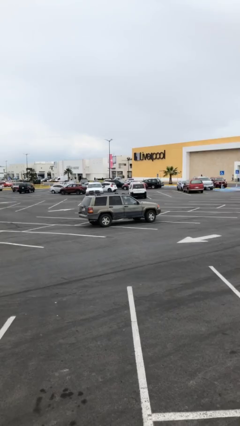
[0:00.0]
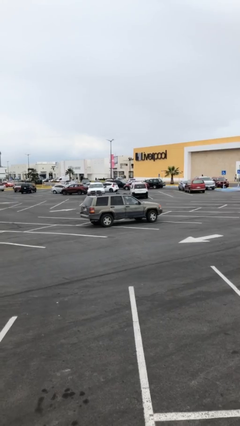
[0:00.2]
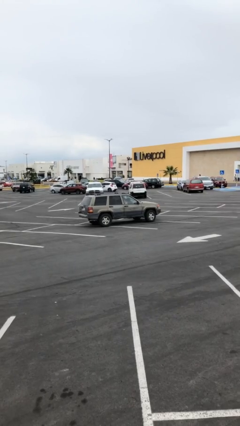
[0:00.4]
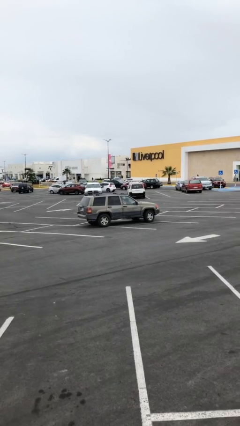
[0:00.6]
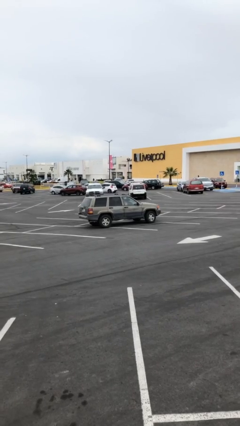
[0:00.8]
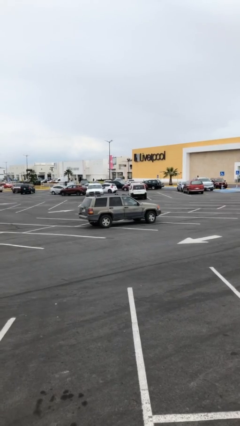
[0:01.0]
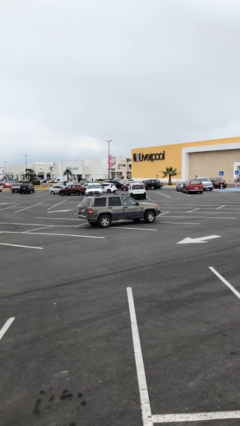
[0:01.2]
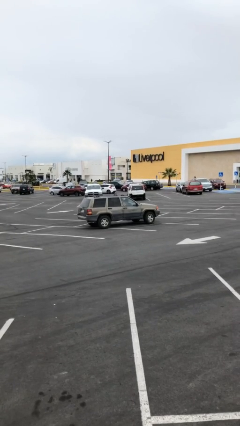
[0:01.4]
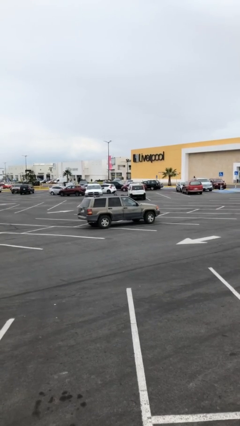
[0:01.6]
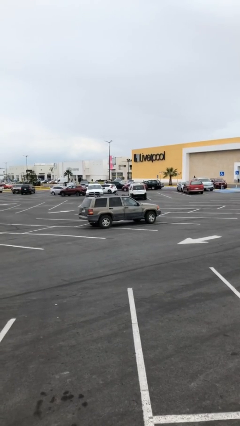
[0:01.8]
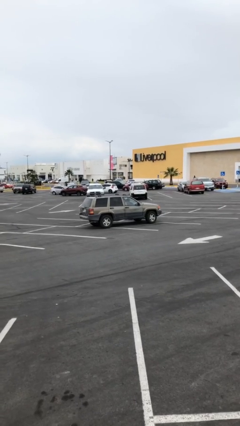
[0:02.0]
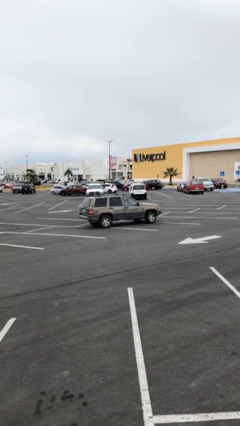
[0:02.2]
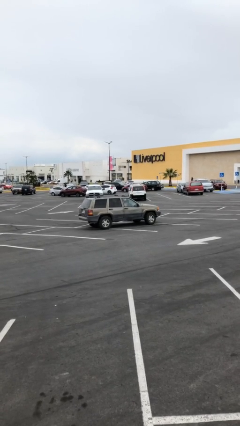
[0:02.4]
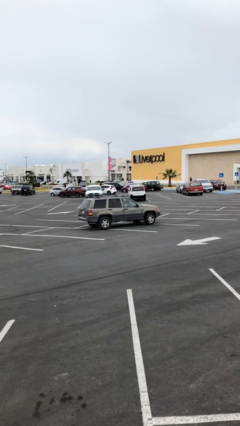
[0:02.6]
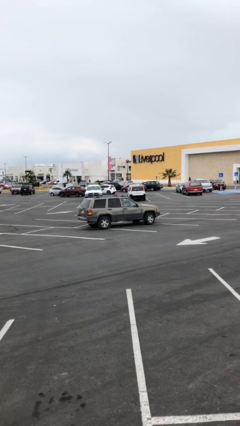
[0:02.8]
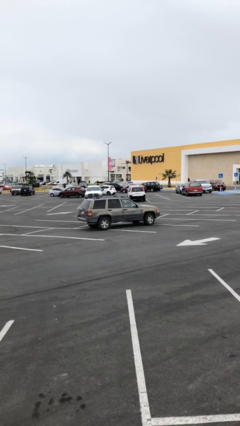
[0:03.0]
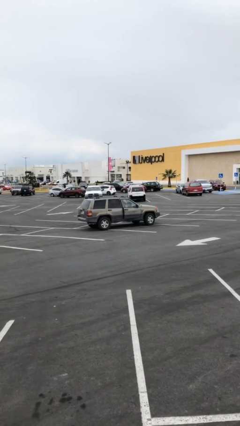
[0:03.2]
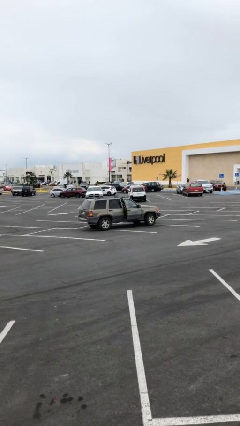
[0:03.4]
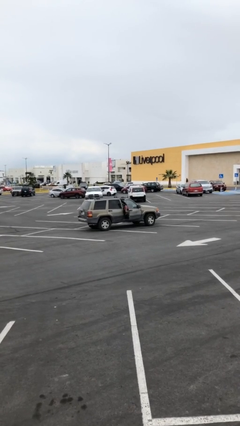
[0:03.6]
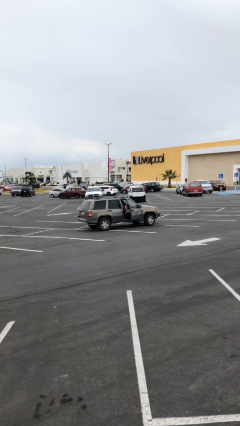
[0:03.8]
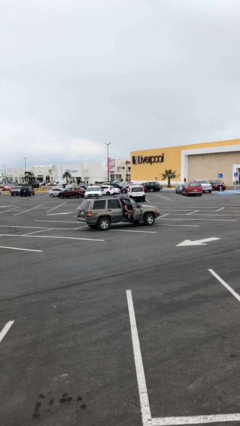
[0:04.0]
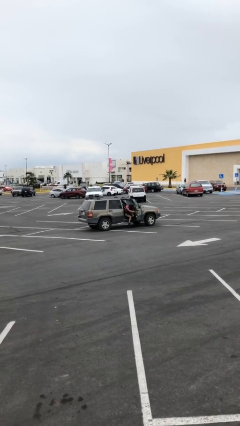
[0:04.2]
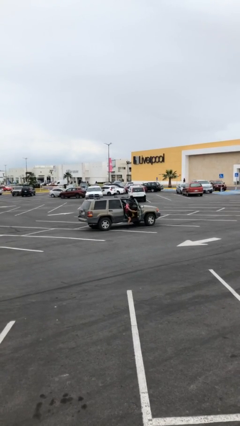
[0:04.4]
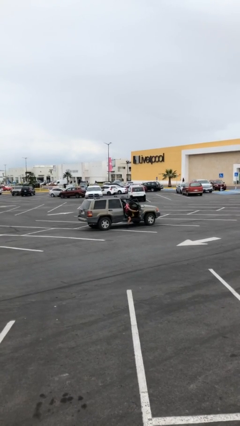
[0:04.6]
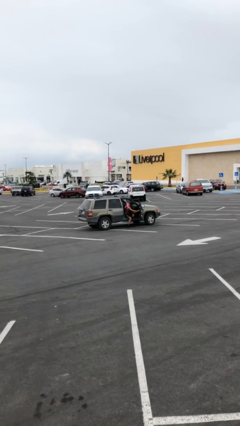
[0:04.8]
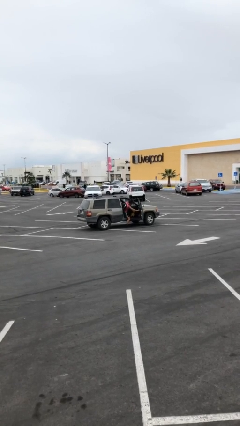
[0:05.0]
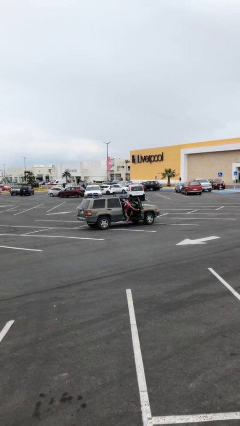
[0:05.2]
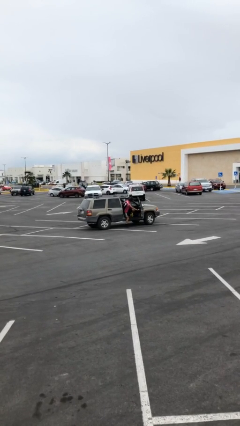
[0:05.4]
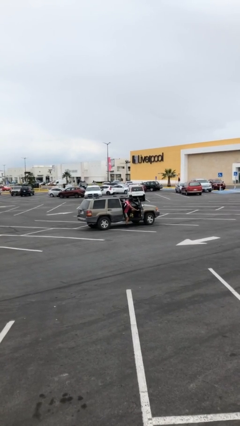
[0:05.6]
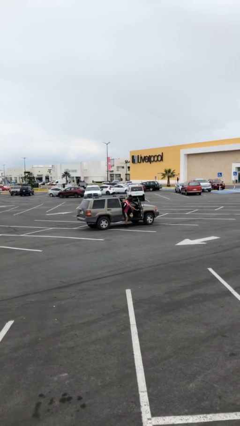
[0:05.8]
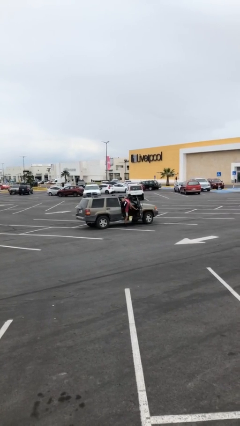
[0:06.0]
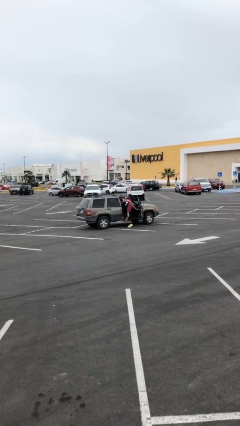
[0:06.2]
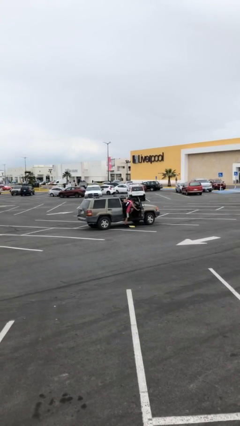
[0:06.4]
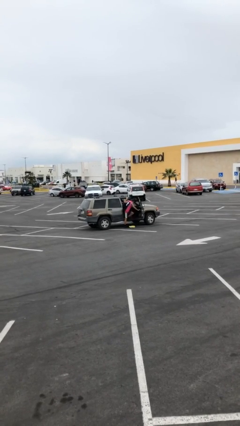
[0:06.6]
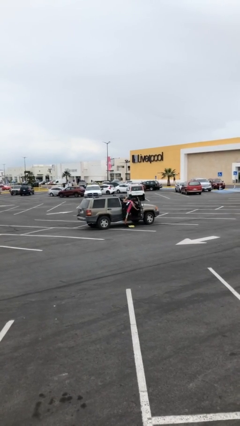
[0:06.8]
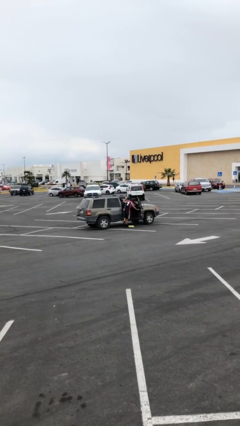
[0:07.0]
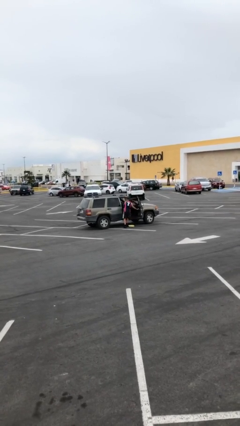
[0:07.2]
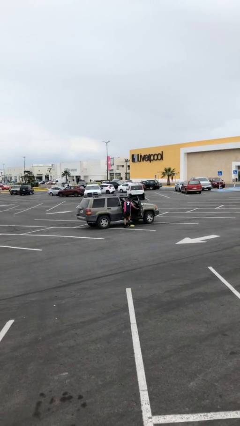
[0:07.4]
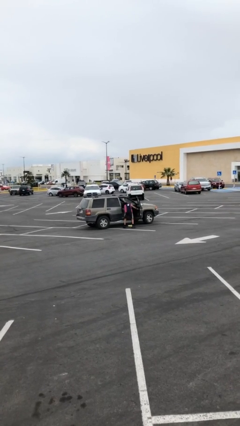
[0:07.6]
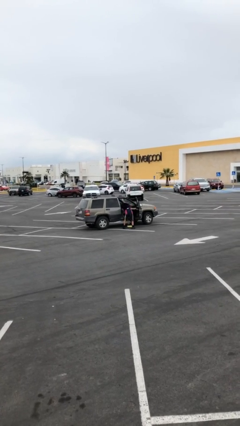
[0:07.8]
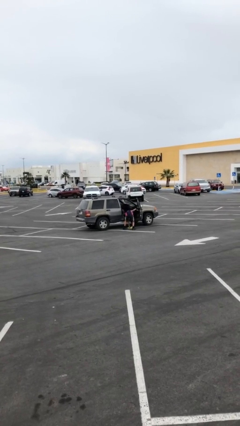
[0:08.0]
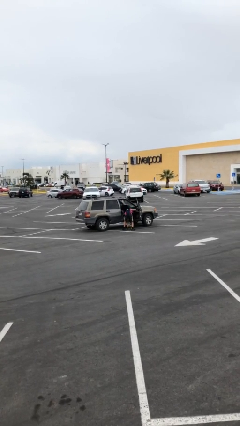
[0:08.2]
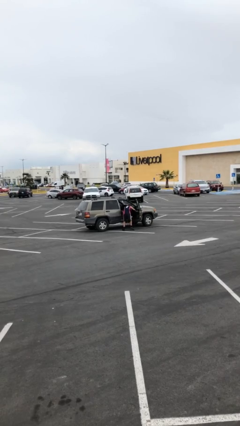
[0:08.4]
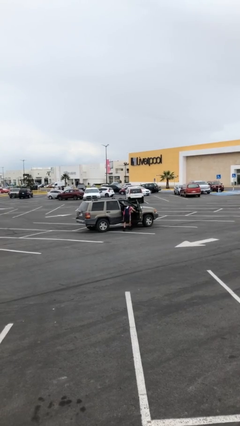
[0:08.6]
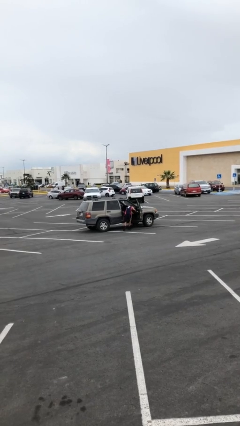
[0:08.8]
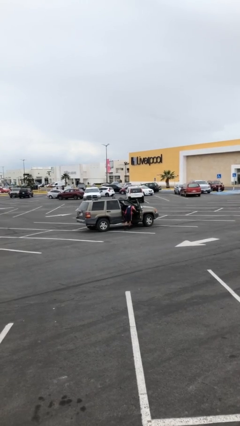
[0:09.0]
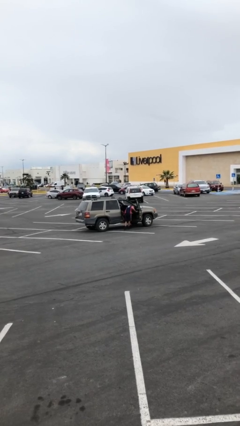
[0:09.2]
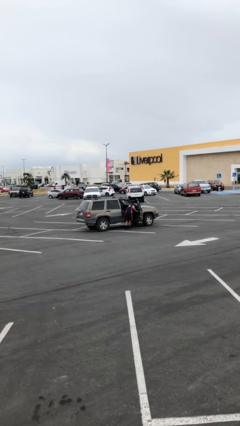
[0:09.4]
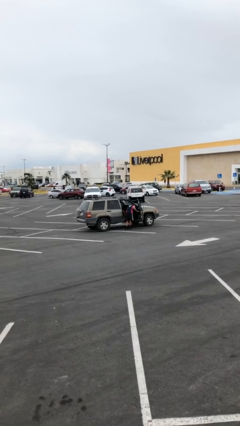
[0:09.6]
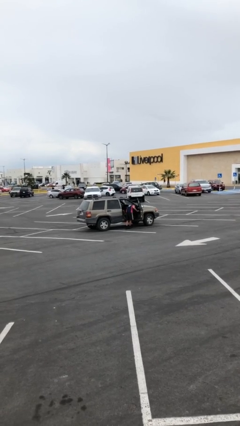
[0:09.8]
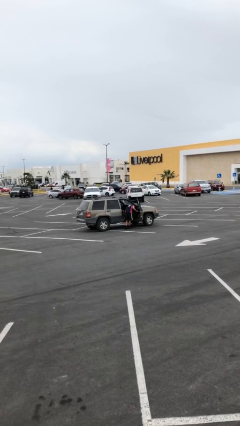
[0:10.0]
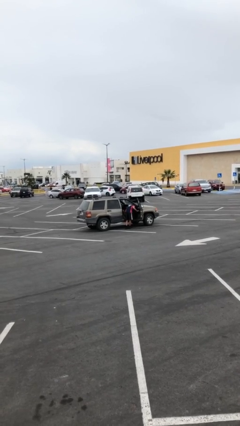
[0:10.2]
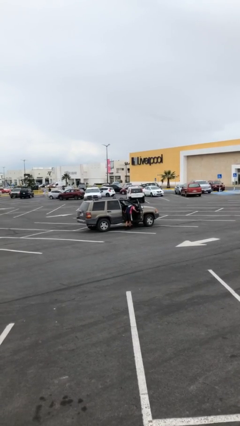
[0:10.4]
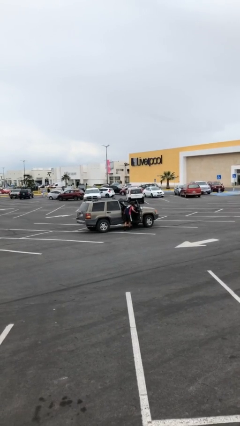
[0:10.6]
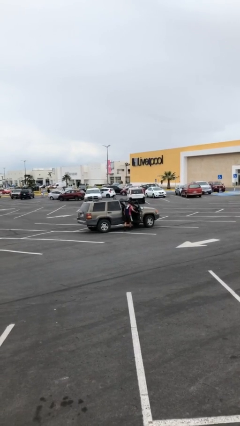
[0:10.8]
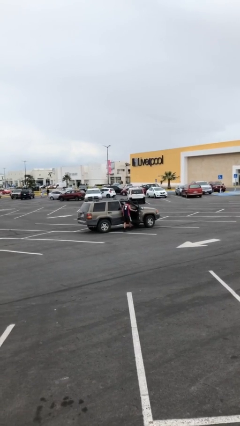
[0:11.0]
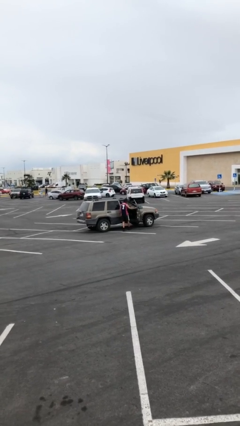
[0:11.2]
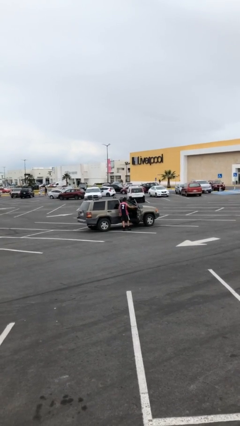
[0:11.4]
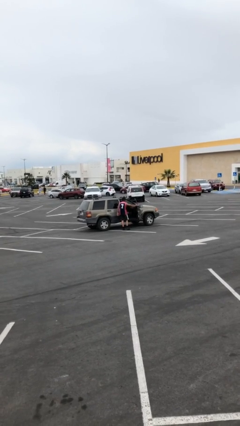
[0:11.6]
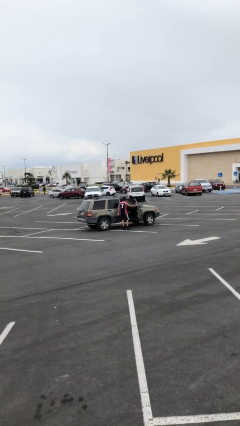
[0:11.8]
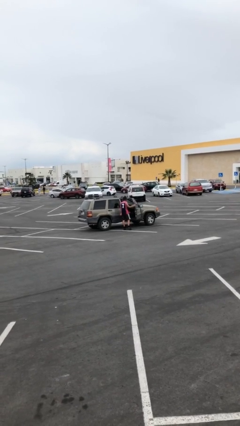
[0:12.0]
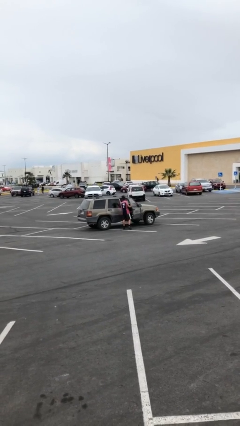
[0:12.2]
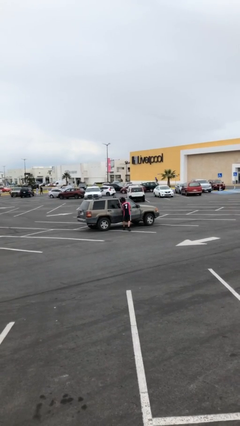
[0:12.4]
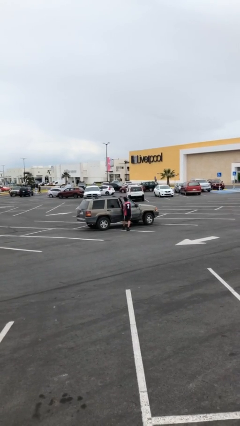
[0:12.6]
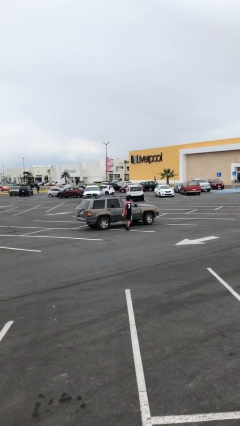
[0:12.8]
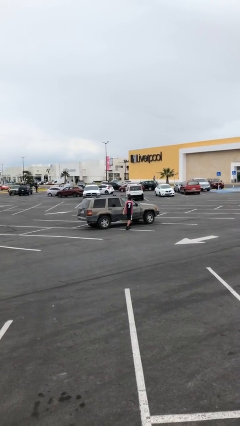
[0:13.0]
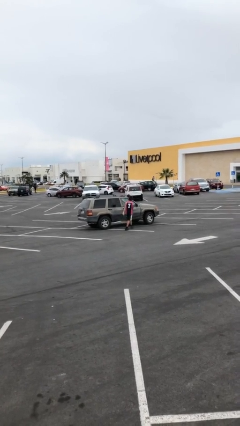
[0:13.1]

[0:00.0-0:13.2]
car drops off person

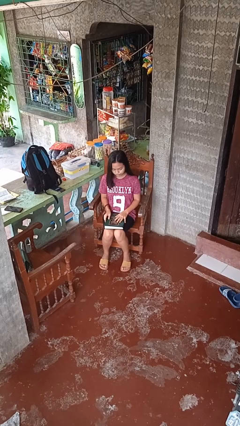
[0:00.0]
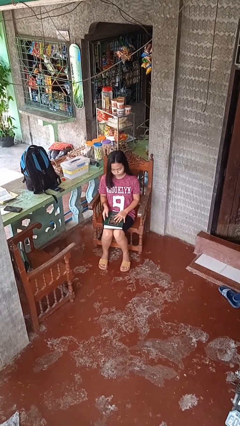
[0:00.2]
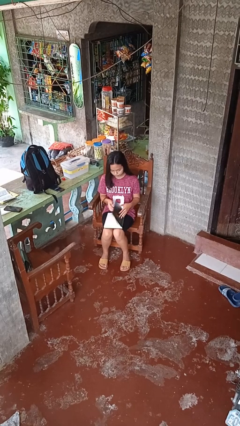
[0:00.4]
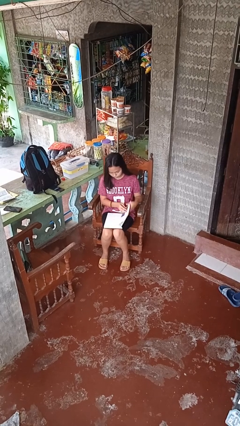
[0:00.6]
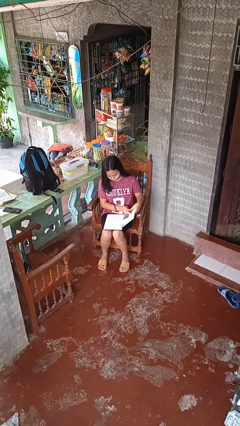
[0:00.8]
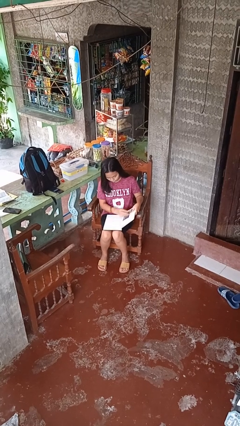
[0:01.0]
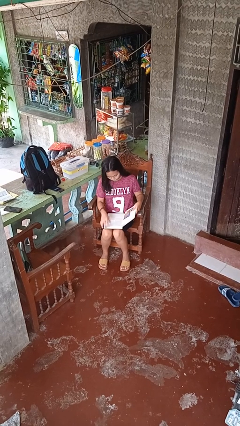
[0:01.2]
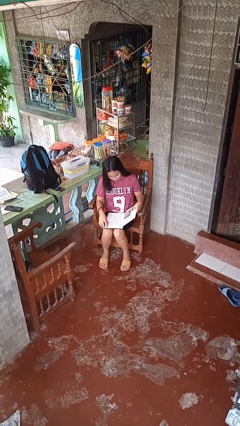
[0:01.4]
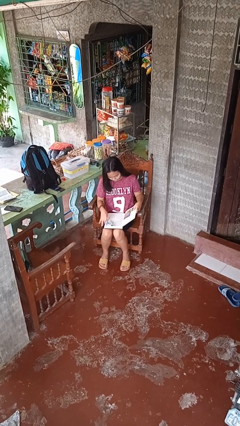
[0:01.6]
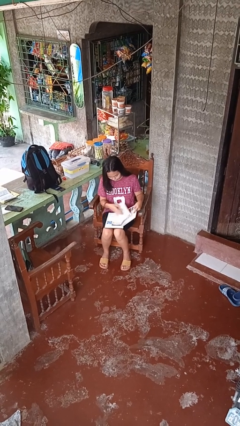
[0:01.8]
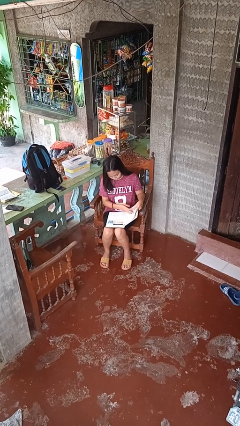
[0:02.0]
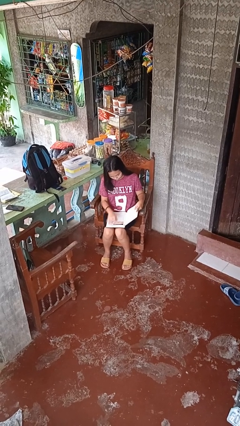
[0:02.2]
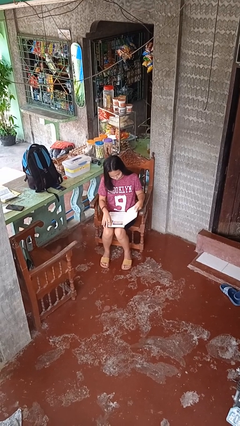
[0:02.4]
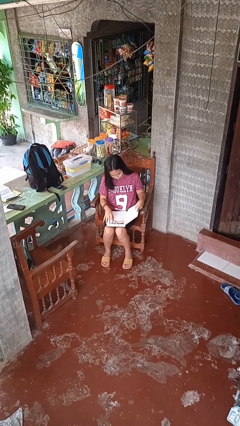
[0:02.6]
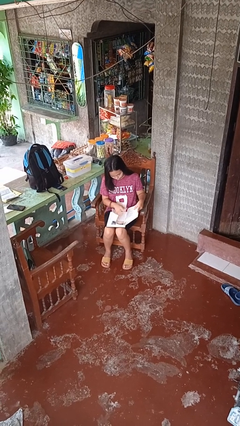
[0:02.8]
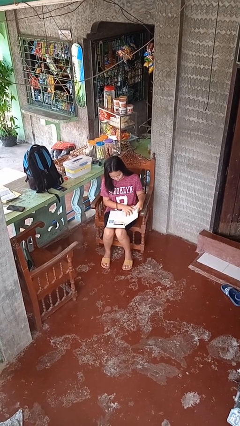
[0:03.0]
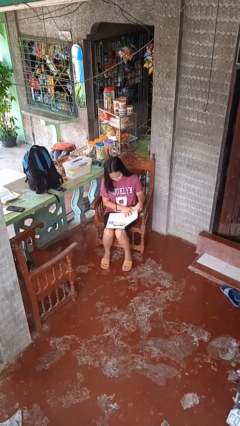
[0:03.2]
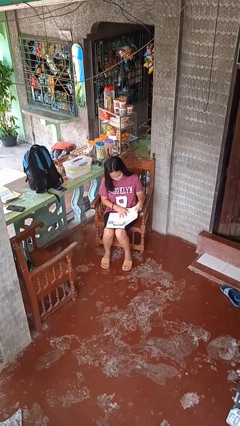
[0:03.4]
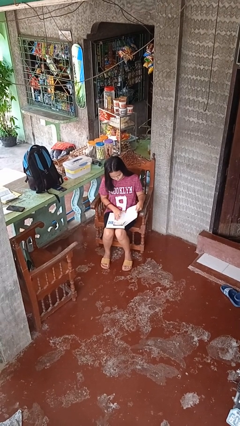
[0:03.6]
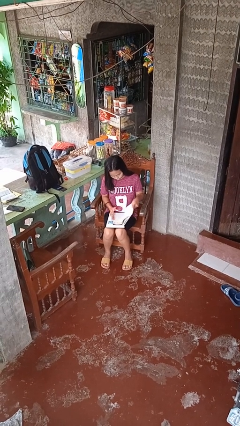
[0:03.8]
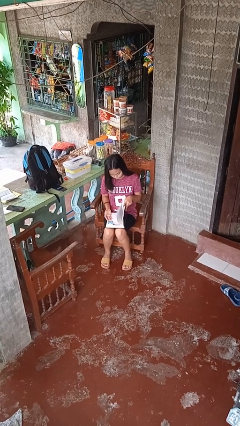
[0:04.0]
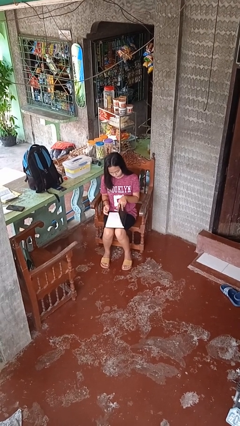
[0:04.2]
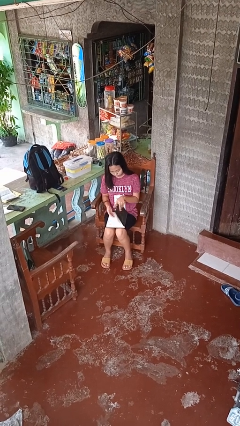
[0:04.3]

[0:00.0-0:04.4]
person reads book

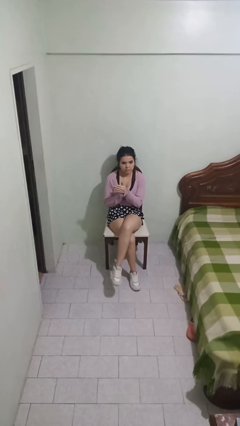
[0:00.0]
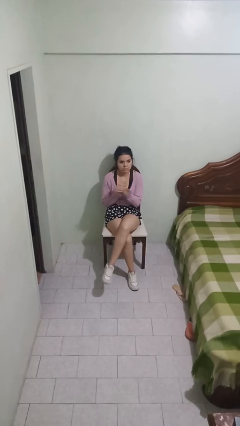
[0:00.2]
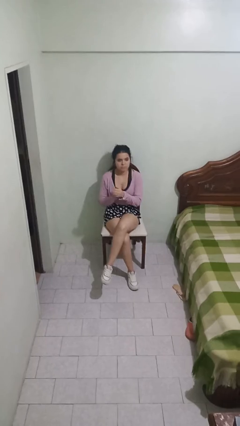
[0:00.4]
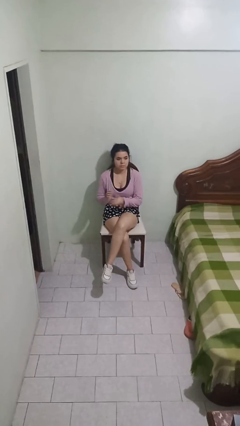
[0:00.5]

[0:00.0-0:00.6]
person claps hands

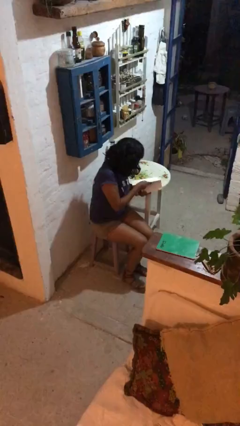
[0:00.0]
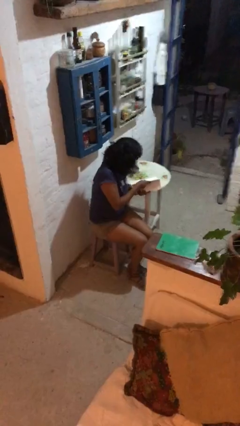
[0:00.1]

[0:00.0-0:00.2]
person reads document
